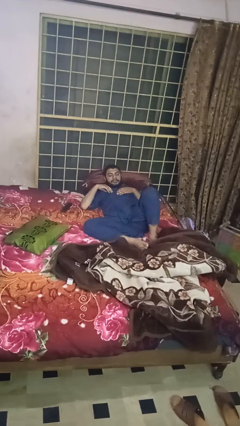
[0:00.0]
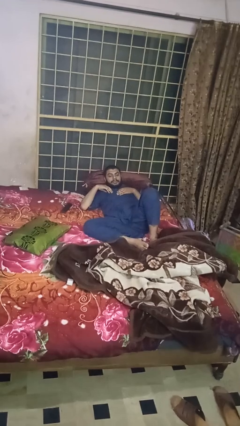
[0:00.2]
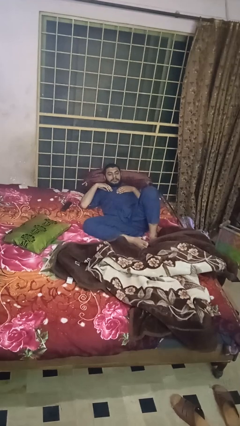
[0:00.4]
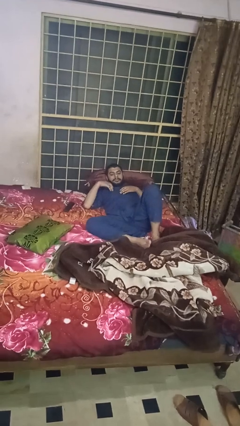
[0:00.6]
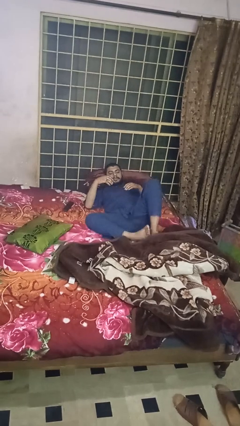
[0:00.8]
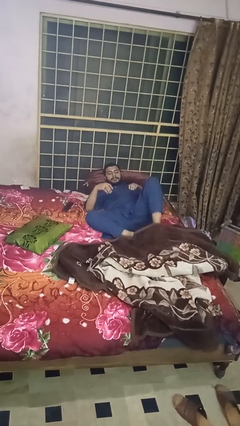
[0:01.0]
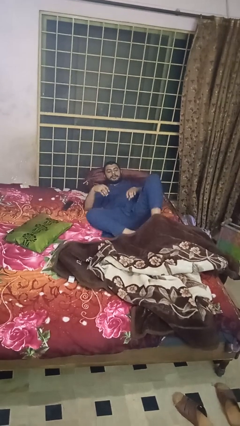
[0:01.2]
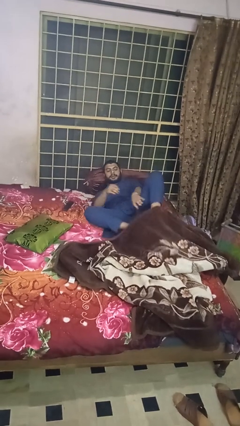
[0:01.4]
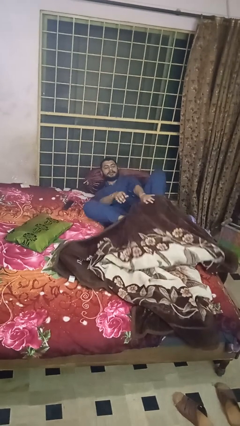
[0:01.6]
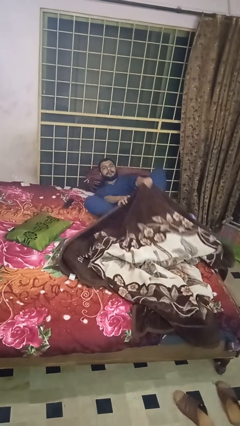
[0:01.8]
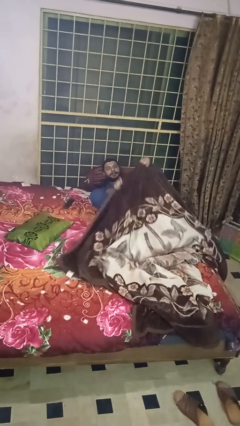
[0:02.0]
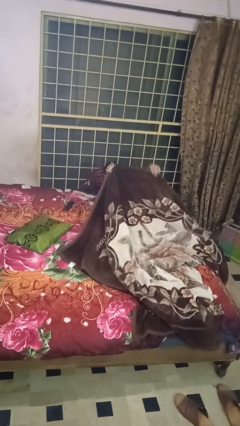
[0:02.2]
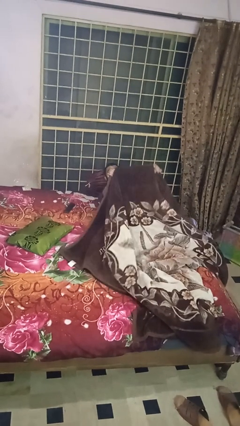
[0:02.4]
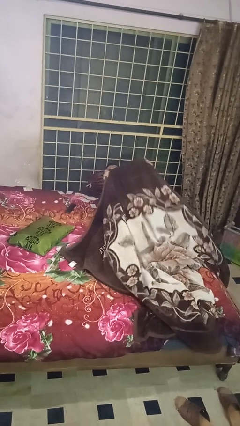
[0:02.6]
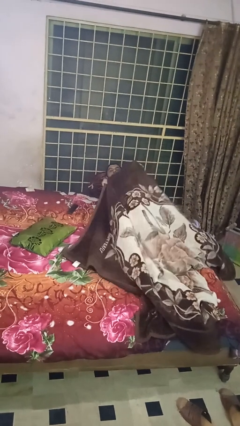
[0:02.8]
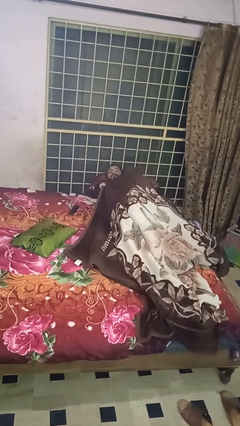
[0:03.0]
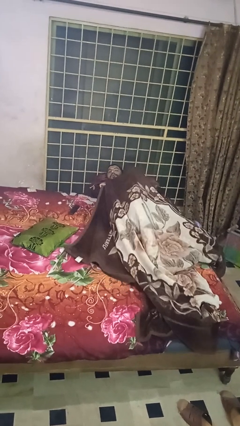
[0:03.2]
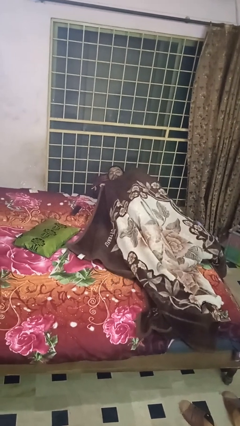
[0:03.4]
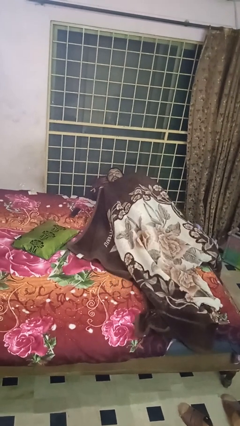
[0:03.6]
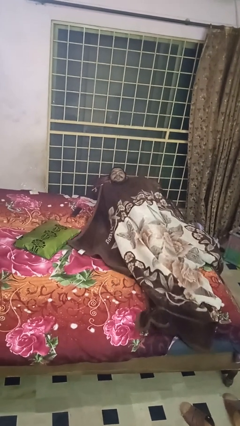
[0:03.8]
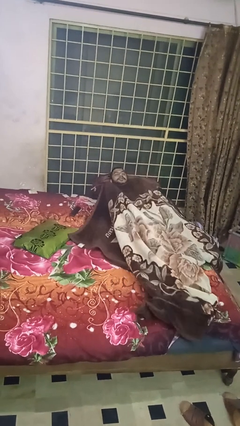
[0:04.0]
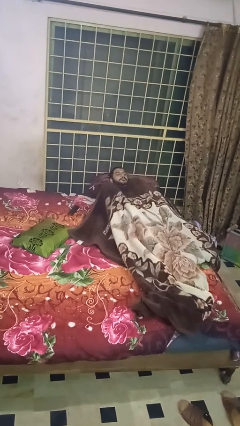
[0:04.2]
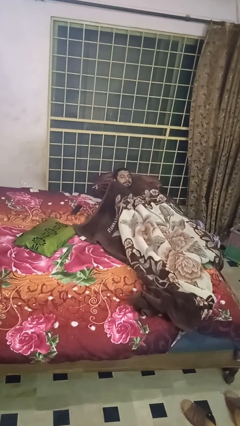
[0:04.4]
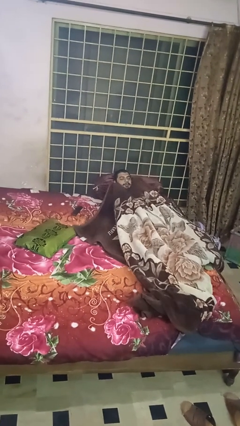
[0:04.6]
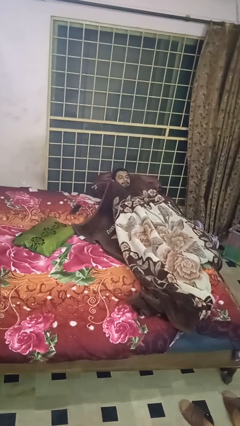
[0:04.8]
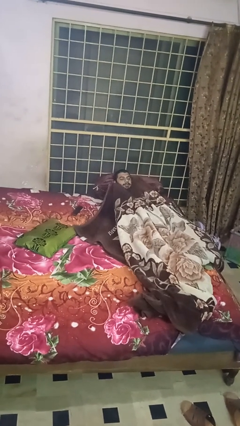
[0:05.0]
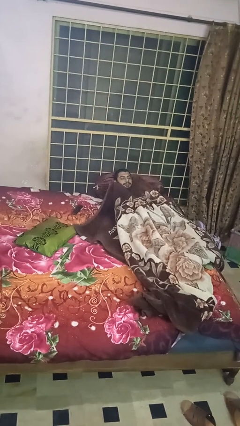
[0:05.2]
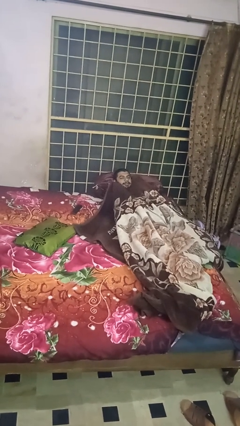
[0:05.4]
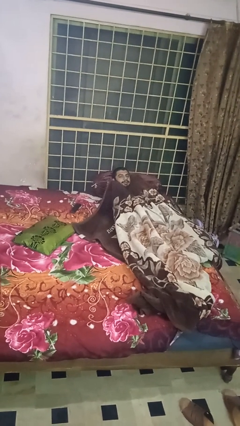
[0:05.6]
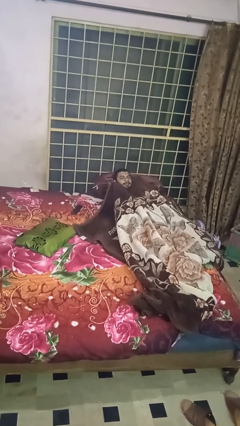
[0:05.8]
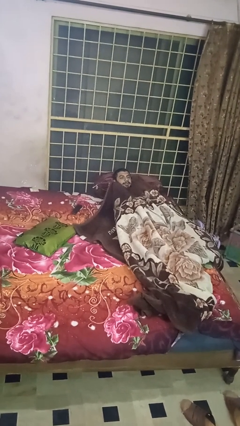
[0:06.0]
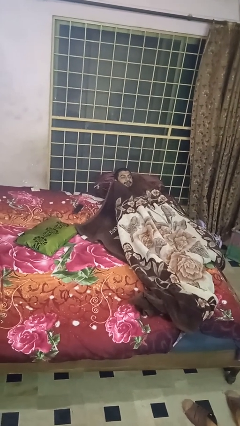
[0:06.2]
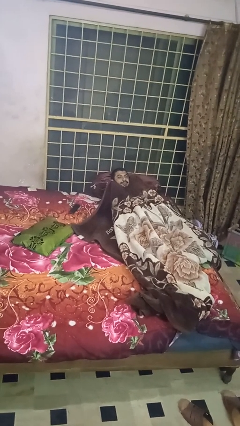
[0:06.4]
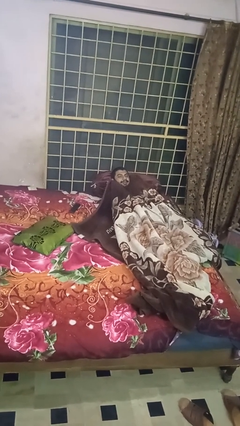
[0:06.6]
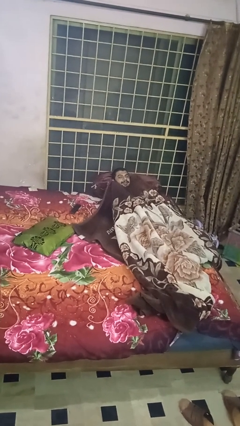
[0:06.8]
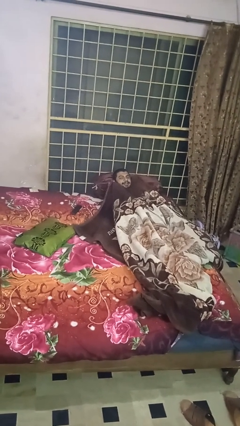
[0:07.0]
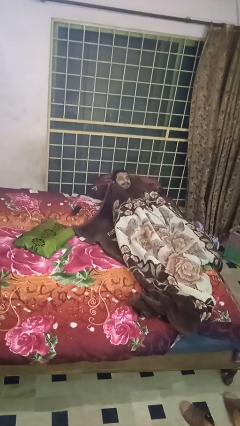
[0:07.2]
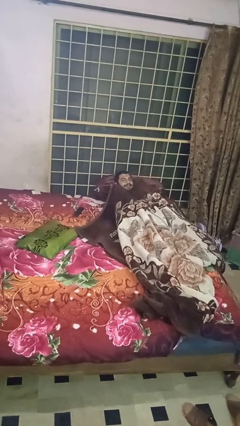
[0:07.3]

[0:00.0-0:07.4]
person covers with blanket

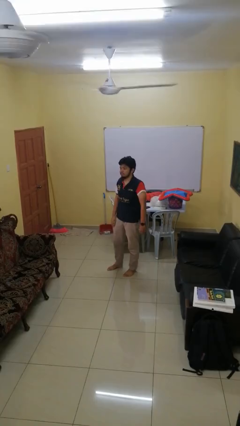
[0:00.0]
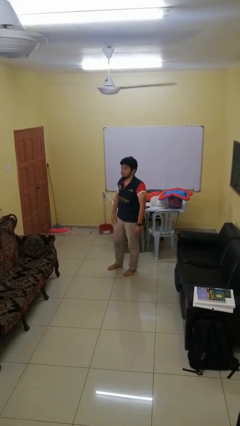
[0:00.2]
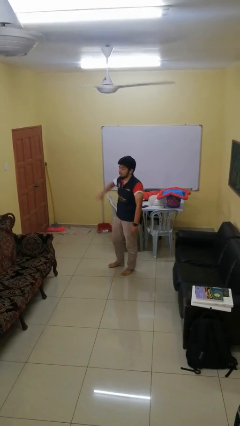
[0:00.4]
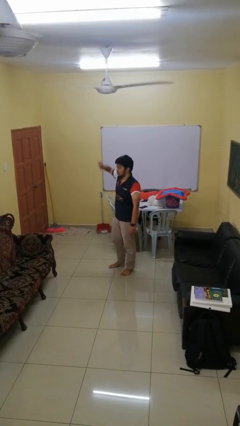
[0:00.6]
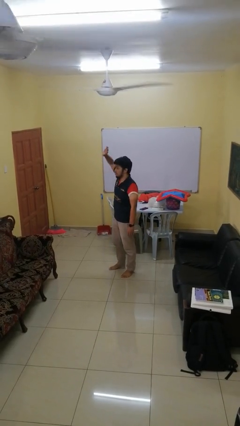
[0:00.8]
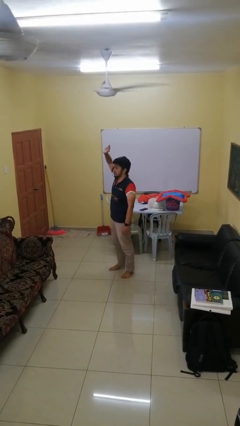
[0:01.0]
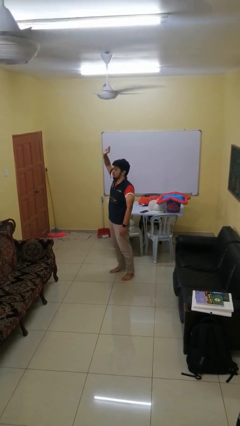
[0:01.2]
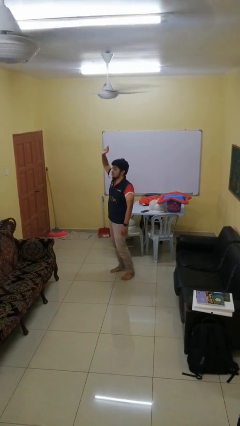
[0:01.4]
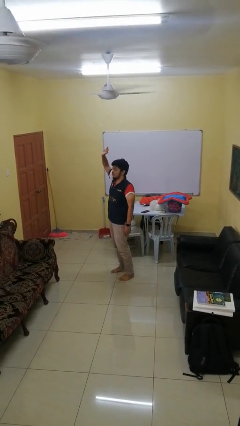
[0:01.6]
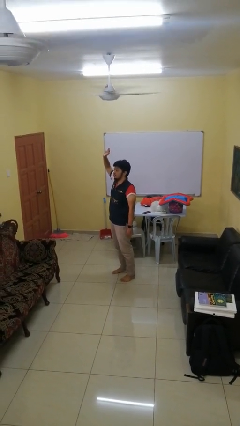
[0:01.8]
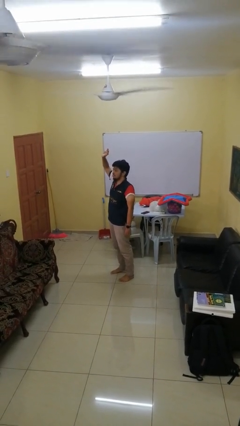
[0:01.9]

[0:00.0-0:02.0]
person gestures raise hand

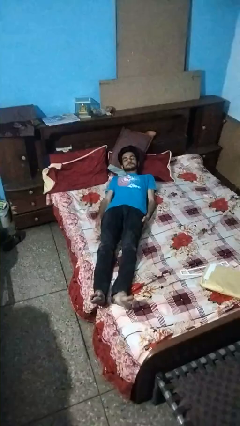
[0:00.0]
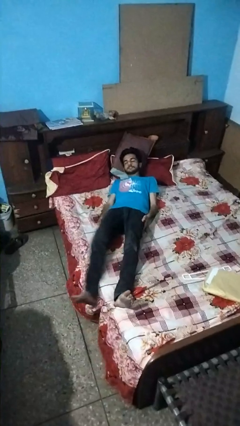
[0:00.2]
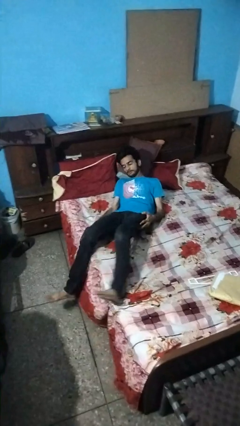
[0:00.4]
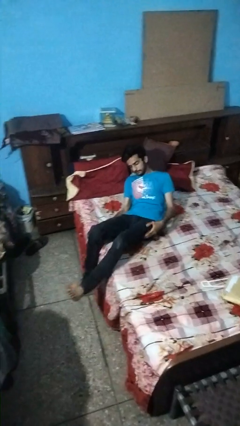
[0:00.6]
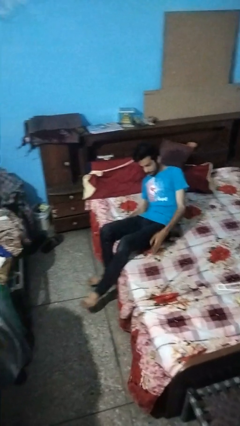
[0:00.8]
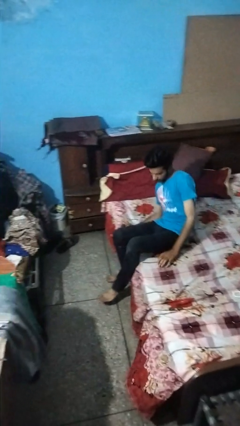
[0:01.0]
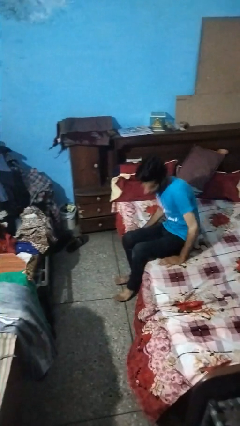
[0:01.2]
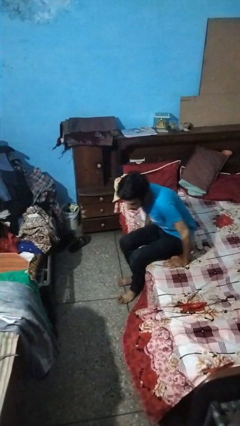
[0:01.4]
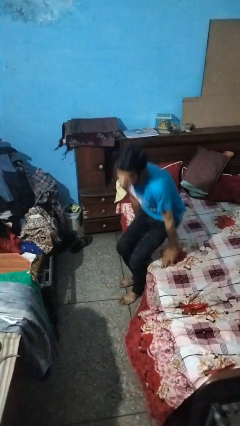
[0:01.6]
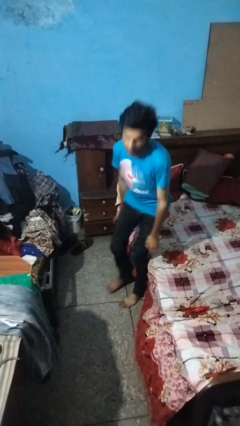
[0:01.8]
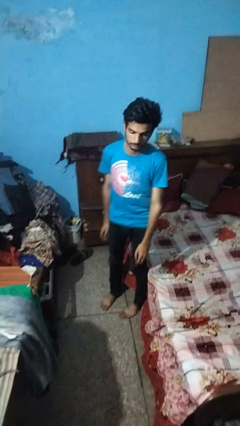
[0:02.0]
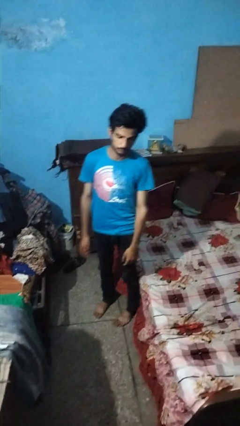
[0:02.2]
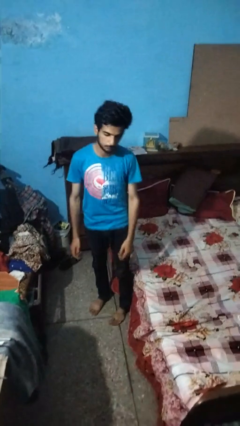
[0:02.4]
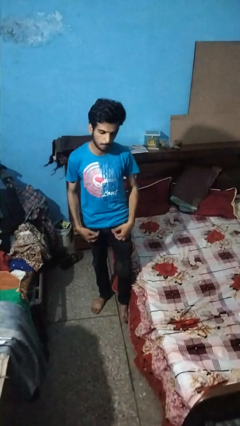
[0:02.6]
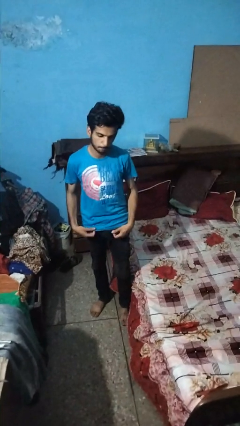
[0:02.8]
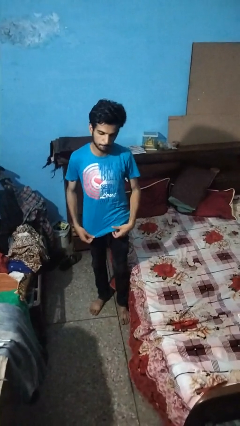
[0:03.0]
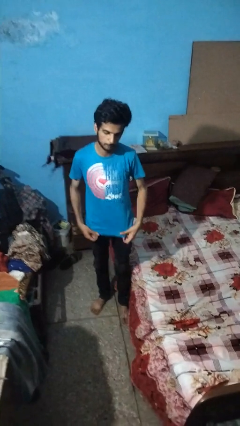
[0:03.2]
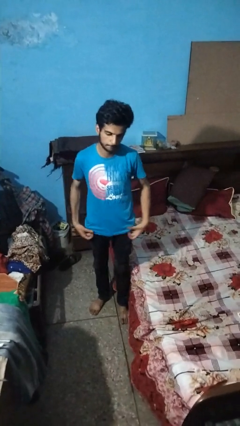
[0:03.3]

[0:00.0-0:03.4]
person stands up

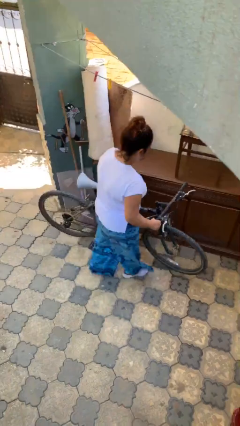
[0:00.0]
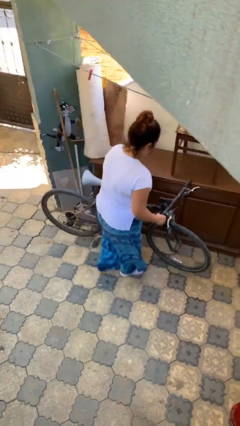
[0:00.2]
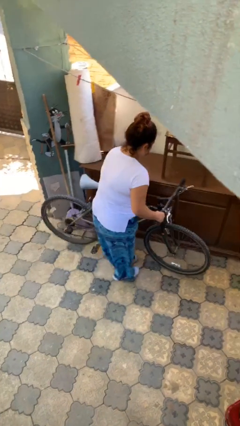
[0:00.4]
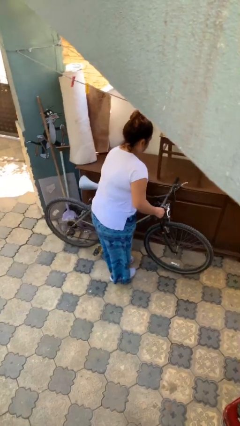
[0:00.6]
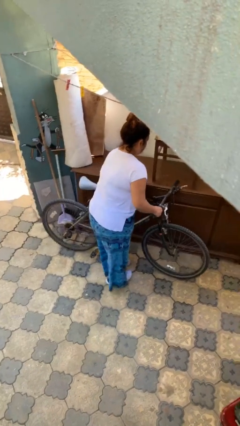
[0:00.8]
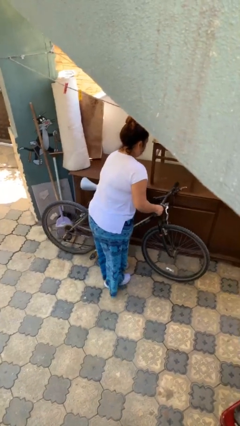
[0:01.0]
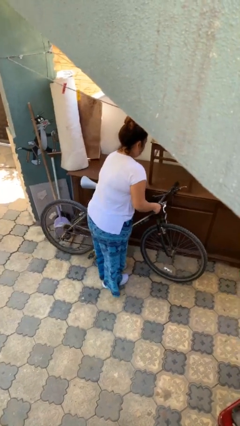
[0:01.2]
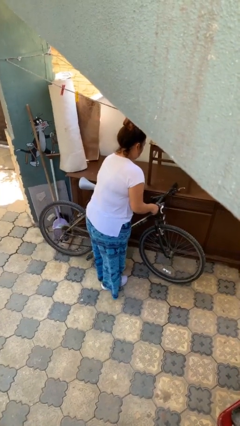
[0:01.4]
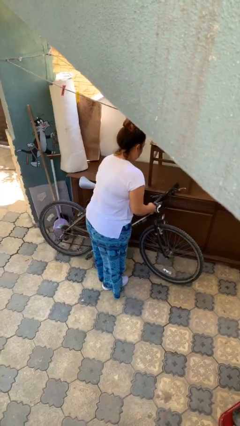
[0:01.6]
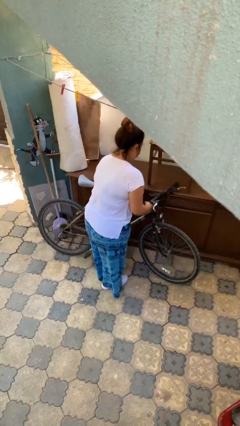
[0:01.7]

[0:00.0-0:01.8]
person puts down object on floor

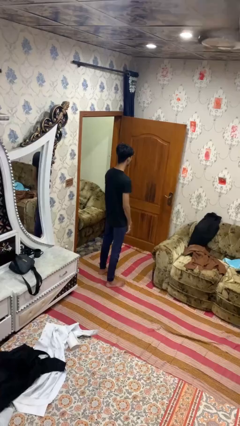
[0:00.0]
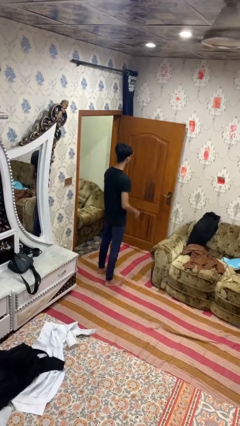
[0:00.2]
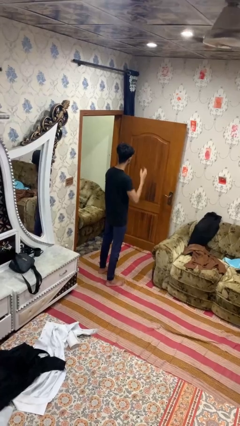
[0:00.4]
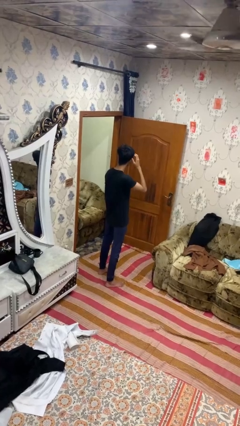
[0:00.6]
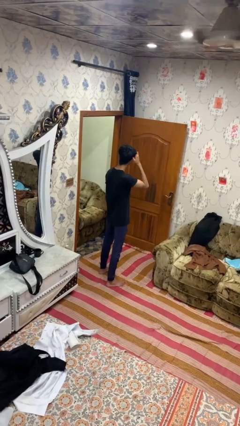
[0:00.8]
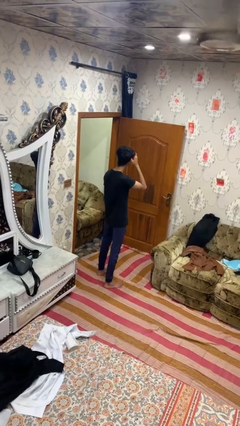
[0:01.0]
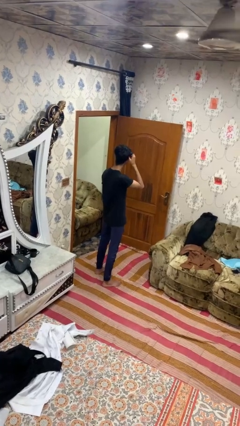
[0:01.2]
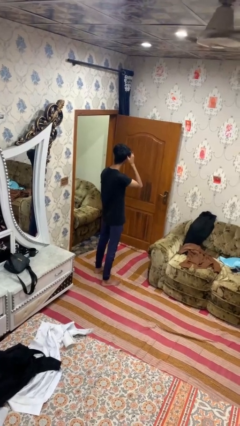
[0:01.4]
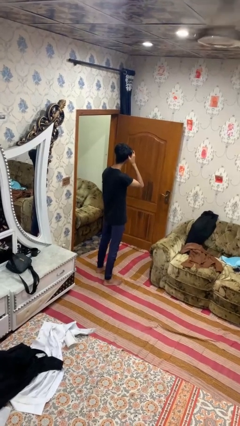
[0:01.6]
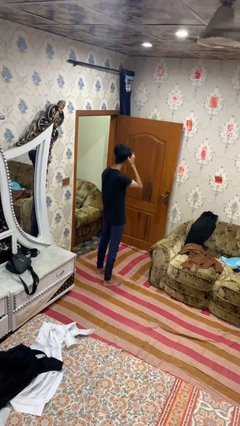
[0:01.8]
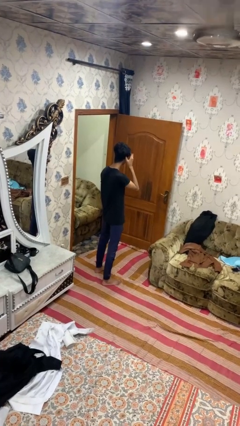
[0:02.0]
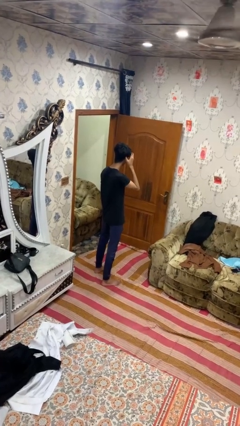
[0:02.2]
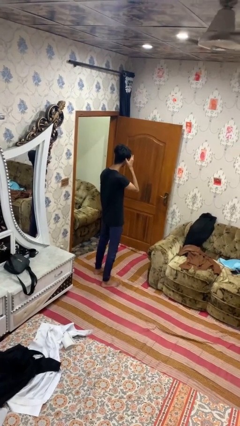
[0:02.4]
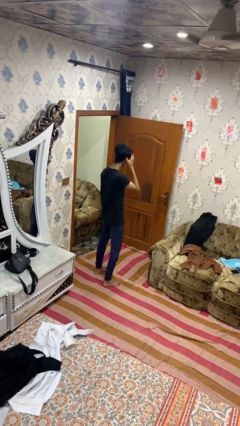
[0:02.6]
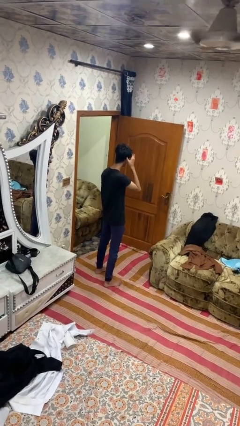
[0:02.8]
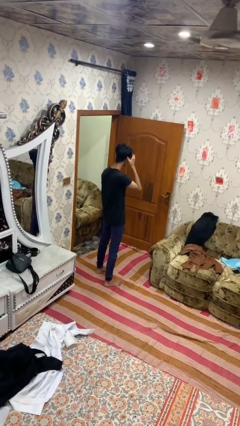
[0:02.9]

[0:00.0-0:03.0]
person strokes hair
